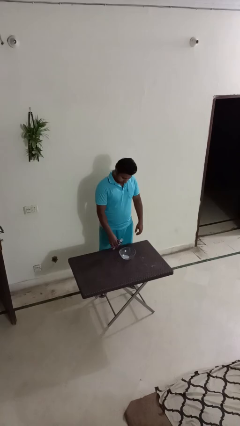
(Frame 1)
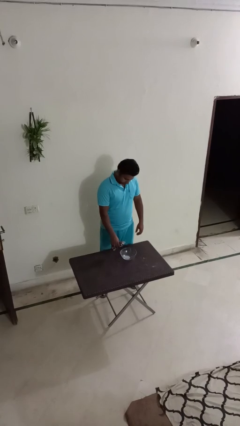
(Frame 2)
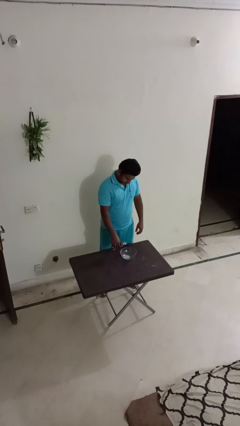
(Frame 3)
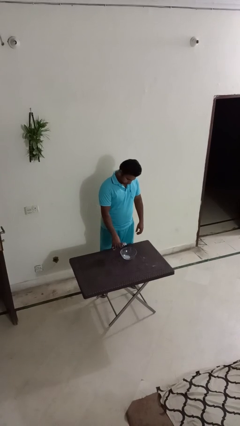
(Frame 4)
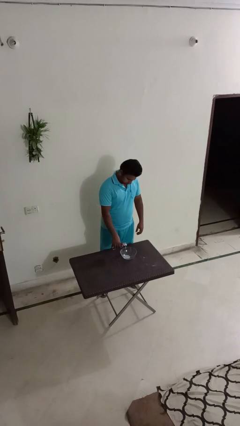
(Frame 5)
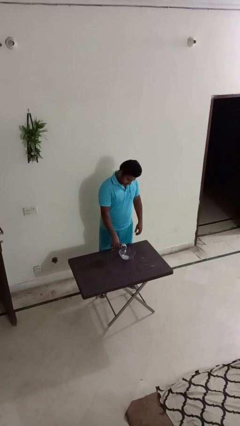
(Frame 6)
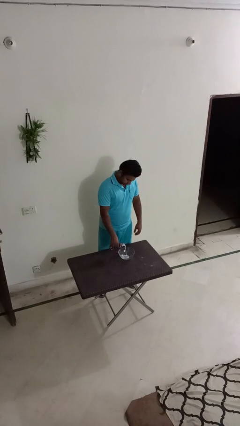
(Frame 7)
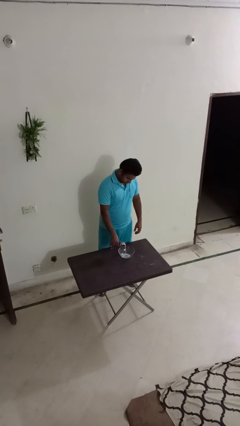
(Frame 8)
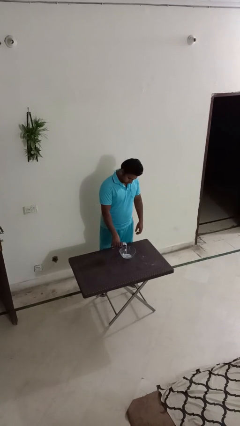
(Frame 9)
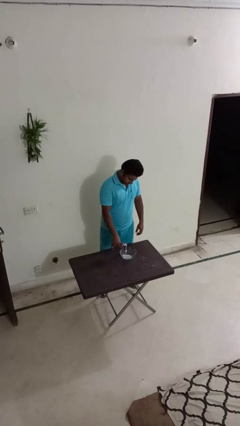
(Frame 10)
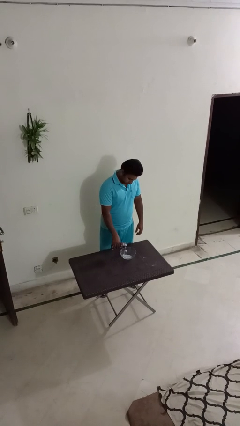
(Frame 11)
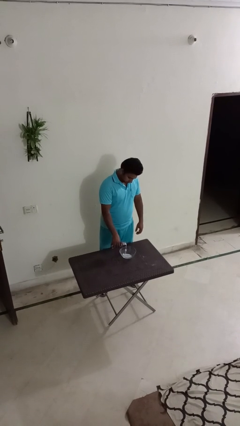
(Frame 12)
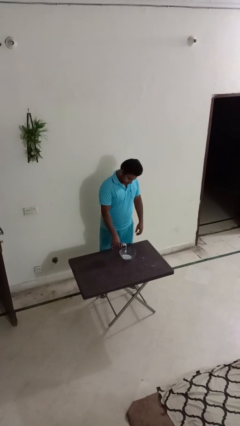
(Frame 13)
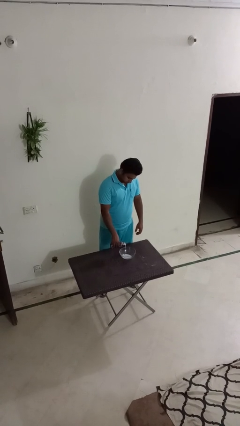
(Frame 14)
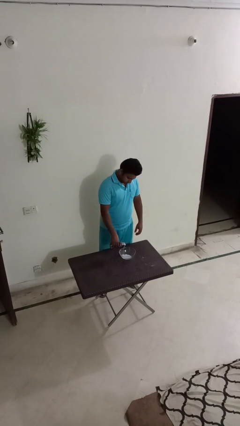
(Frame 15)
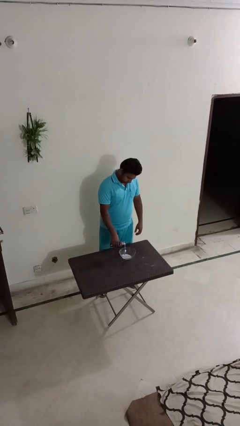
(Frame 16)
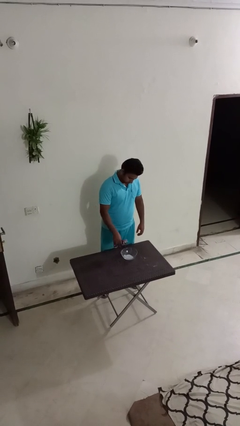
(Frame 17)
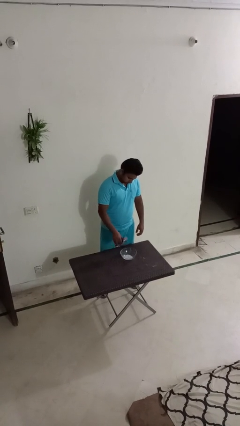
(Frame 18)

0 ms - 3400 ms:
person pours into bowl

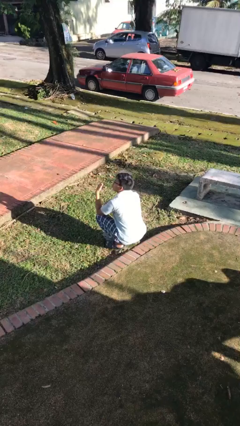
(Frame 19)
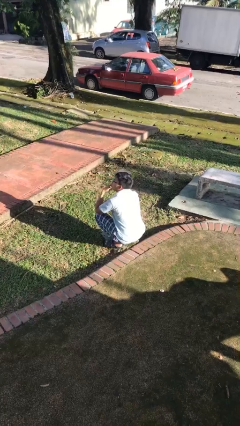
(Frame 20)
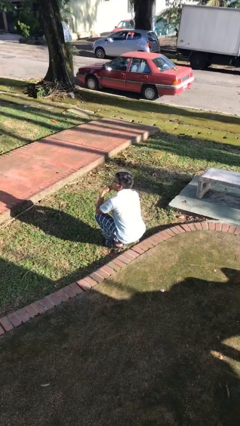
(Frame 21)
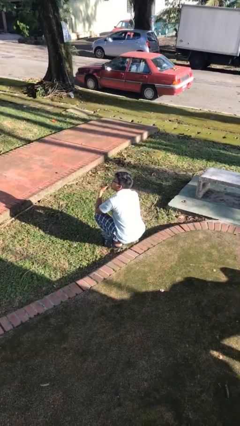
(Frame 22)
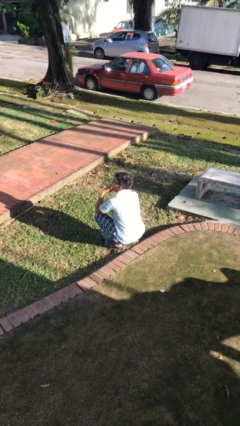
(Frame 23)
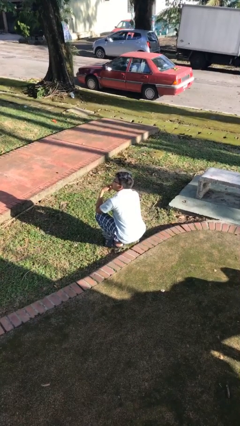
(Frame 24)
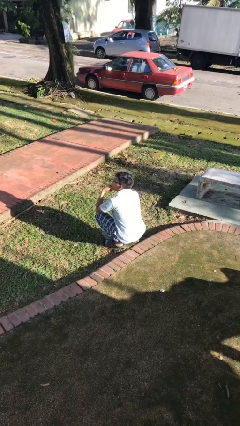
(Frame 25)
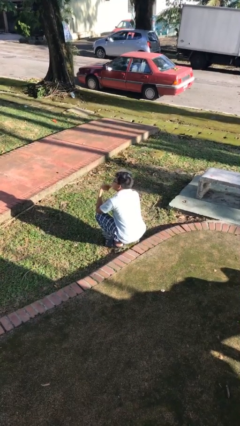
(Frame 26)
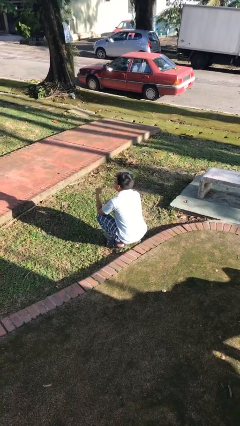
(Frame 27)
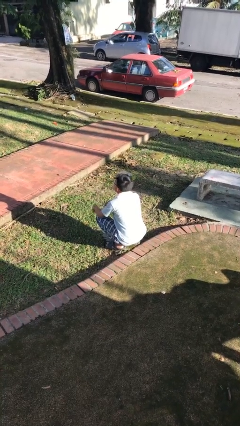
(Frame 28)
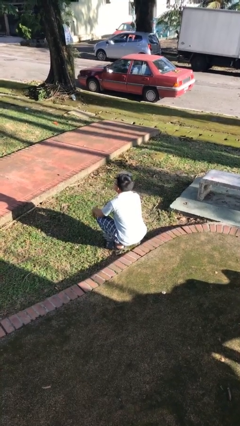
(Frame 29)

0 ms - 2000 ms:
person strokes chin

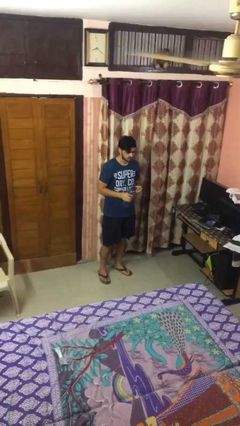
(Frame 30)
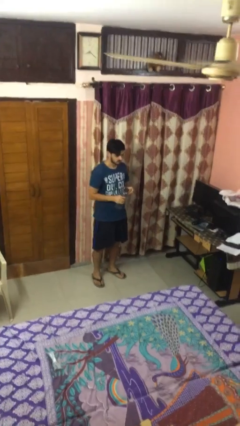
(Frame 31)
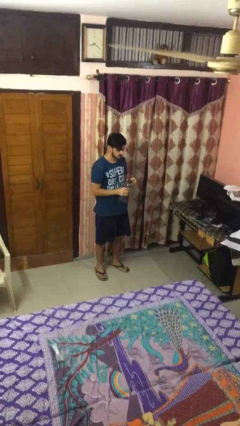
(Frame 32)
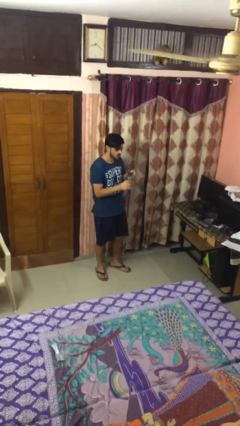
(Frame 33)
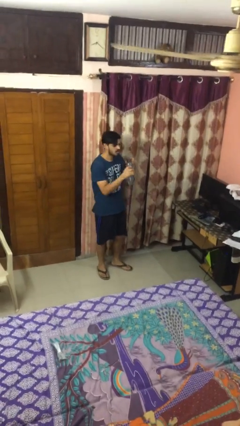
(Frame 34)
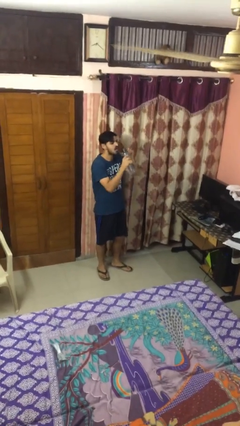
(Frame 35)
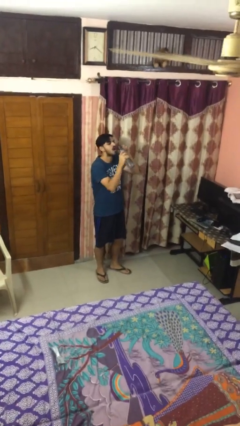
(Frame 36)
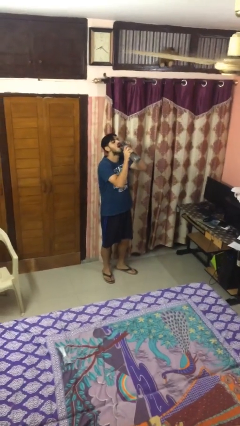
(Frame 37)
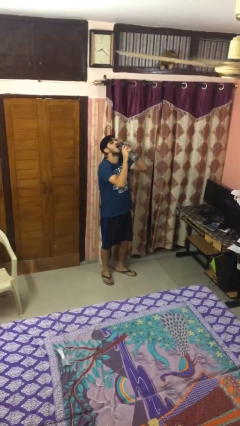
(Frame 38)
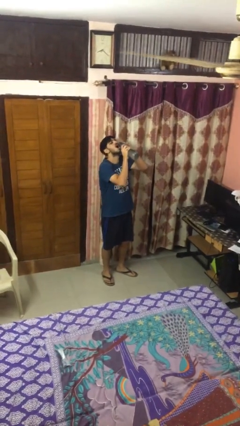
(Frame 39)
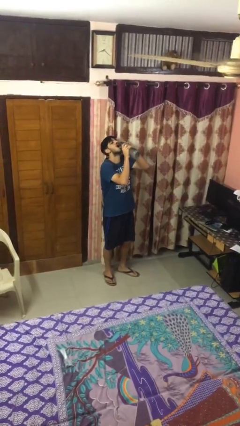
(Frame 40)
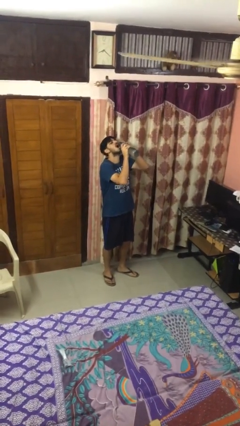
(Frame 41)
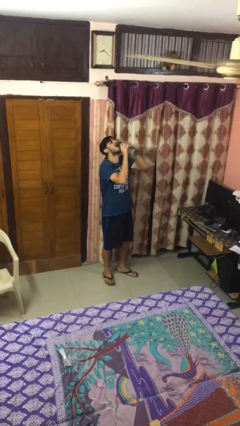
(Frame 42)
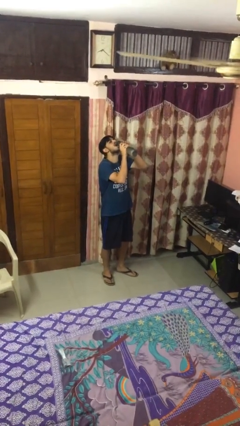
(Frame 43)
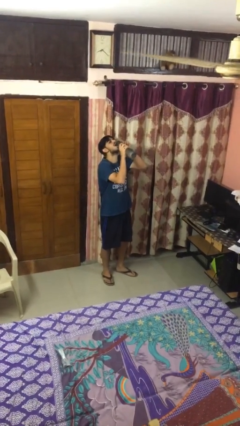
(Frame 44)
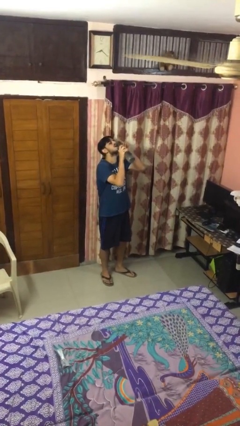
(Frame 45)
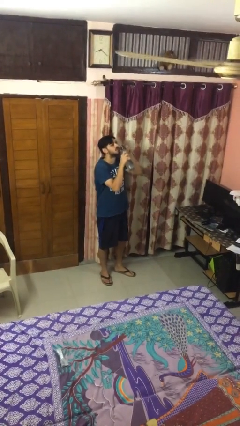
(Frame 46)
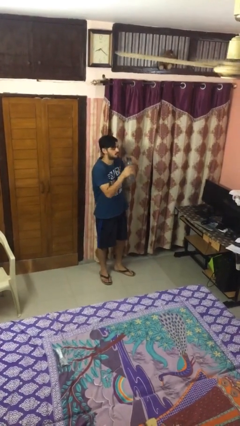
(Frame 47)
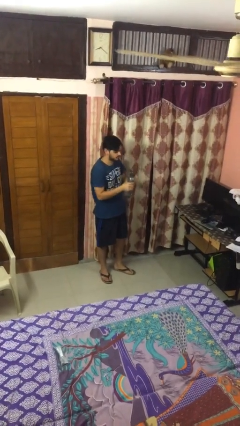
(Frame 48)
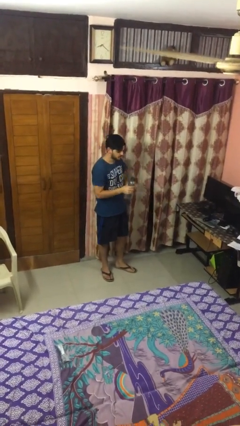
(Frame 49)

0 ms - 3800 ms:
person drinks from bottle

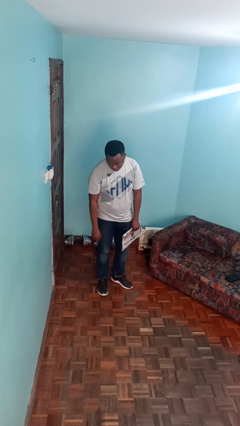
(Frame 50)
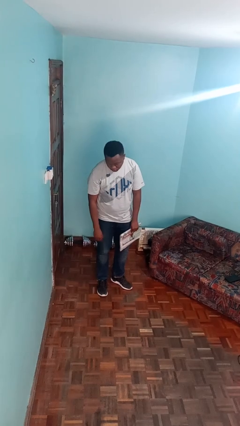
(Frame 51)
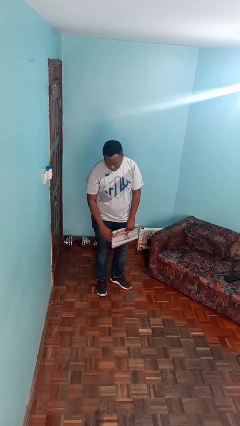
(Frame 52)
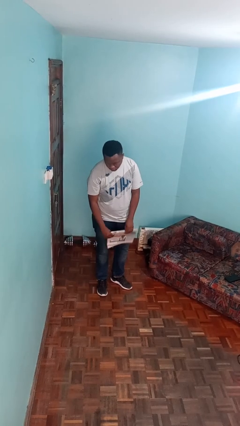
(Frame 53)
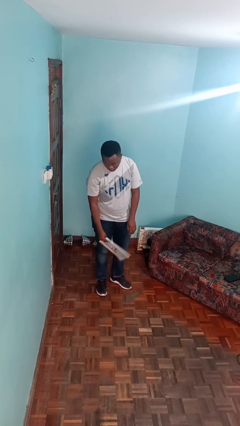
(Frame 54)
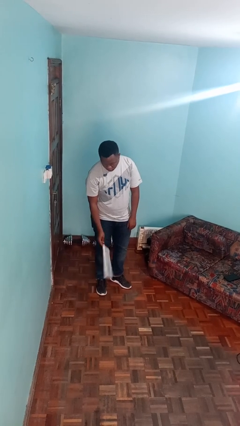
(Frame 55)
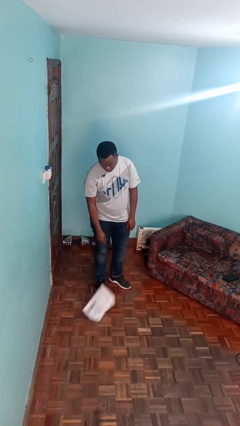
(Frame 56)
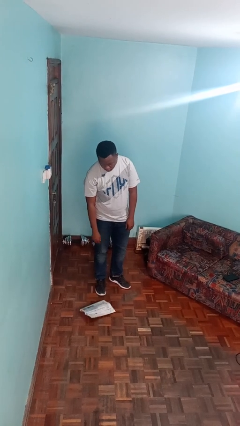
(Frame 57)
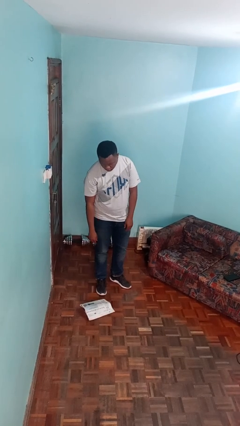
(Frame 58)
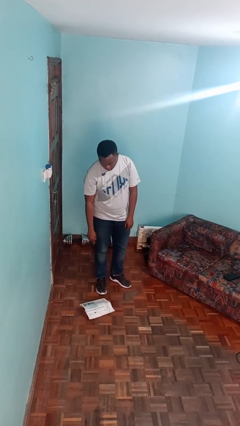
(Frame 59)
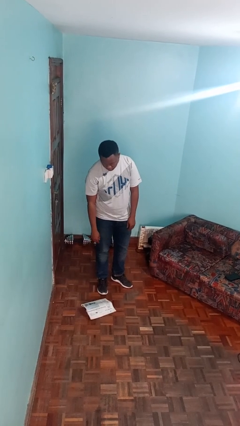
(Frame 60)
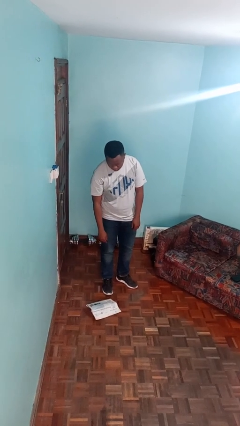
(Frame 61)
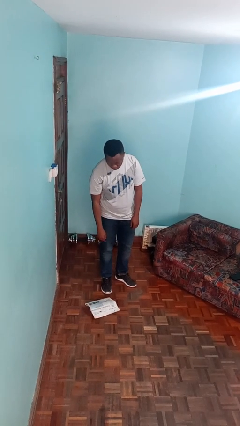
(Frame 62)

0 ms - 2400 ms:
person drops object

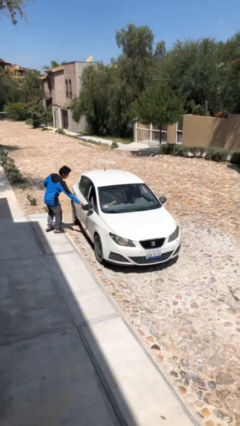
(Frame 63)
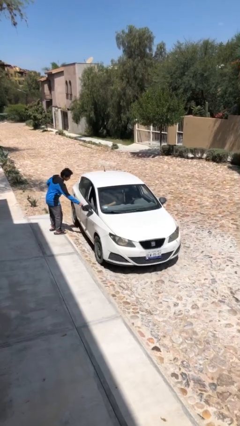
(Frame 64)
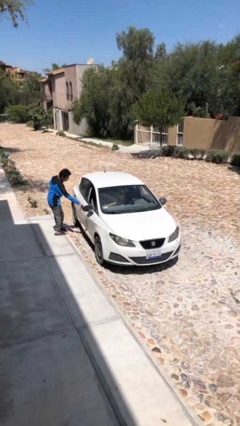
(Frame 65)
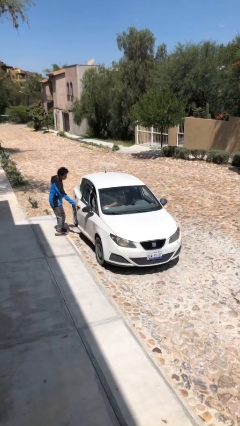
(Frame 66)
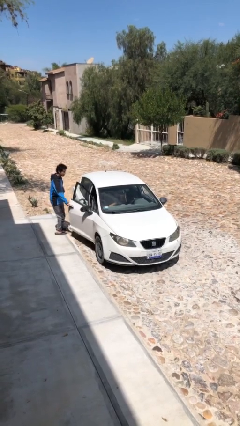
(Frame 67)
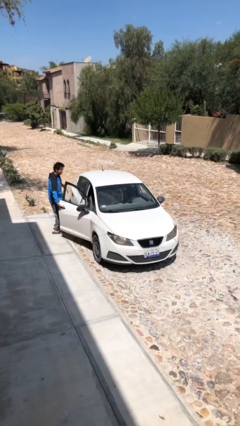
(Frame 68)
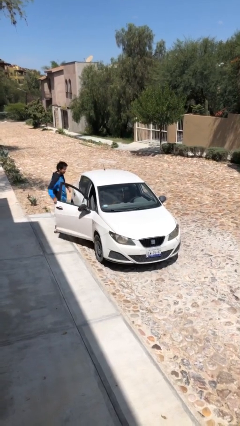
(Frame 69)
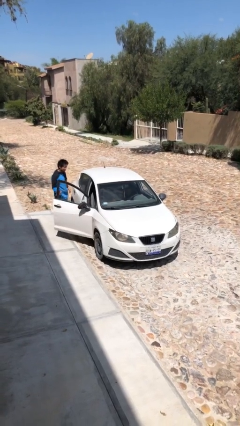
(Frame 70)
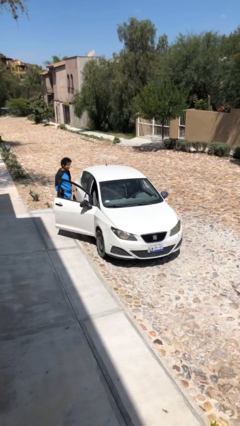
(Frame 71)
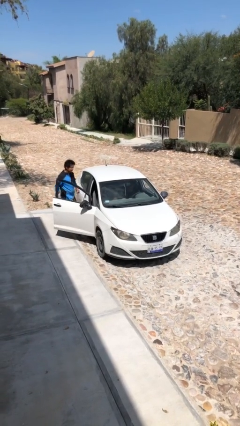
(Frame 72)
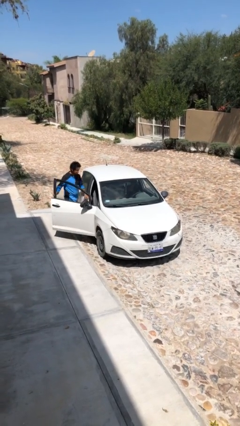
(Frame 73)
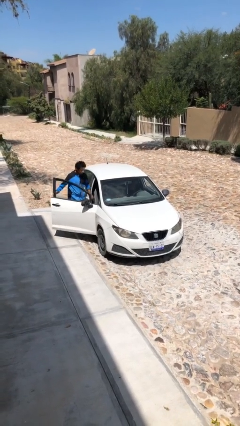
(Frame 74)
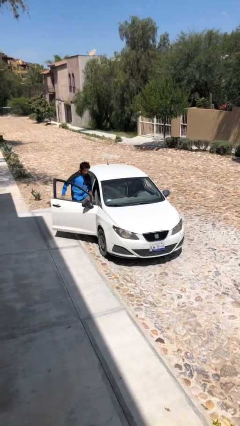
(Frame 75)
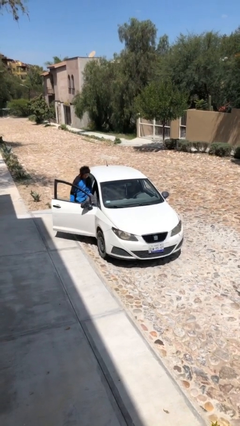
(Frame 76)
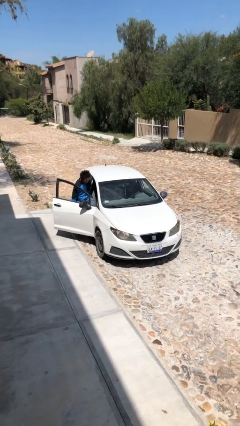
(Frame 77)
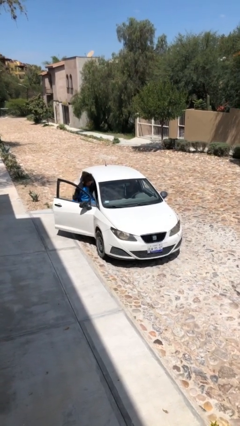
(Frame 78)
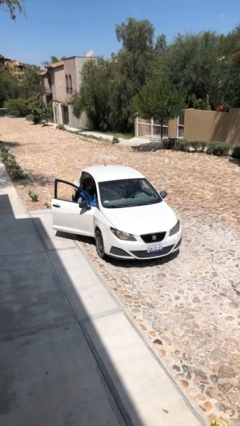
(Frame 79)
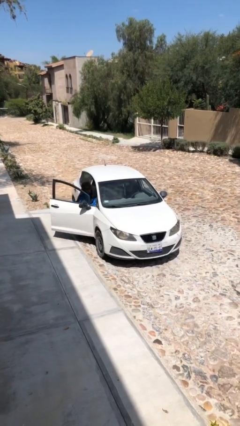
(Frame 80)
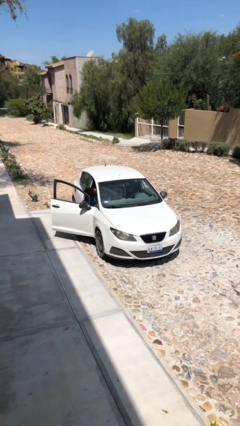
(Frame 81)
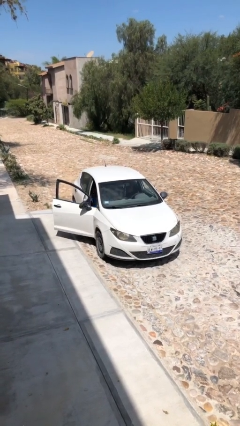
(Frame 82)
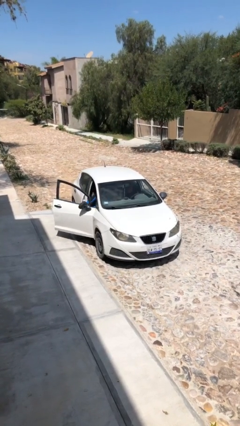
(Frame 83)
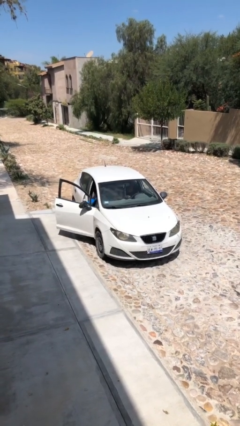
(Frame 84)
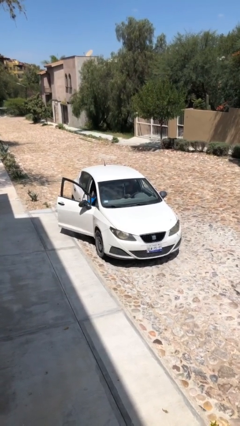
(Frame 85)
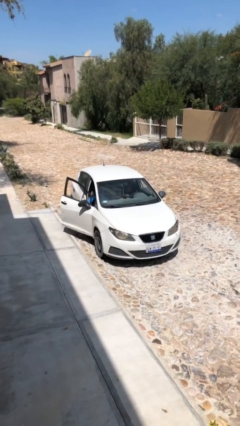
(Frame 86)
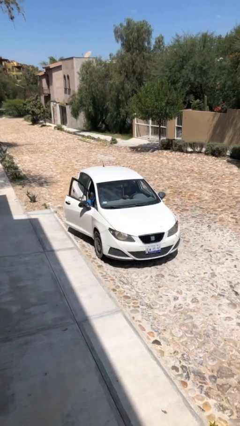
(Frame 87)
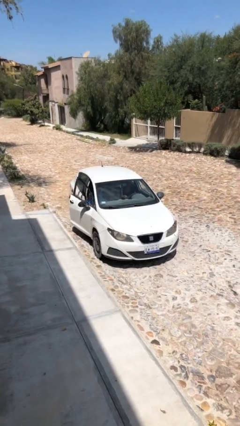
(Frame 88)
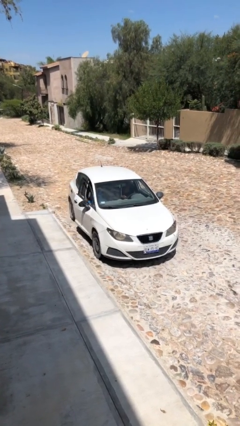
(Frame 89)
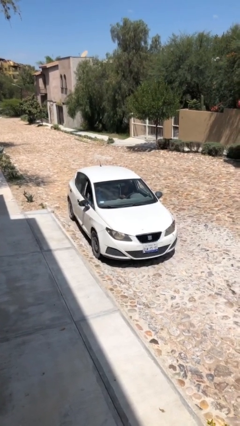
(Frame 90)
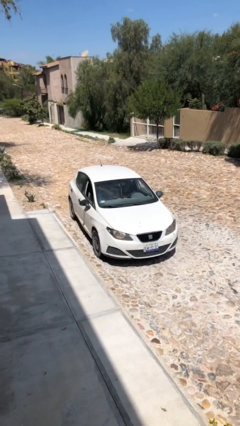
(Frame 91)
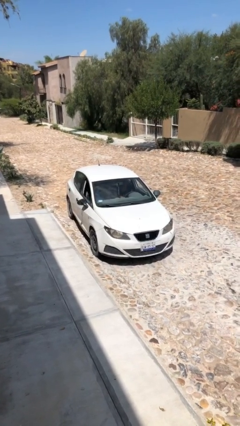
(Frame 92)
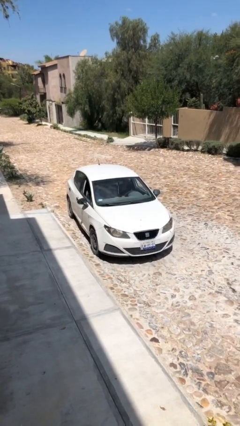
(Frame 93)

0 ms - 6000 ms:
car picks up person
